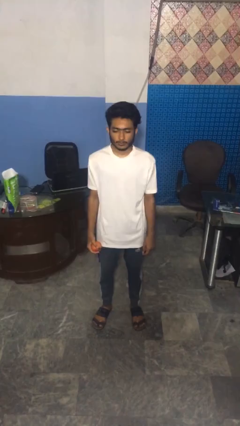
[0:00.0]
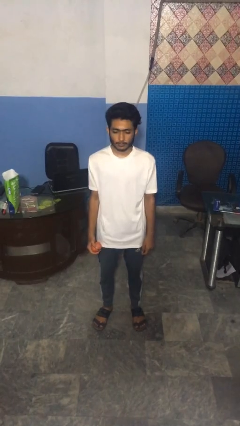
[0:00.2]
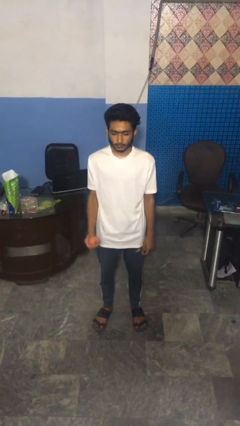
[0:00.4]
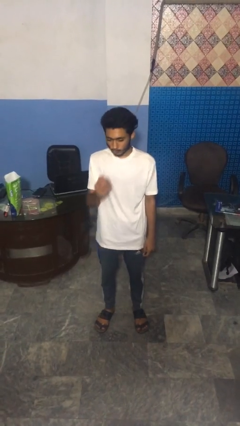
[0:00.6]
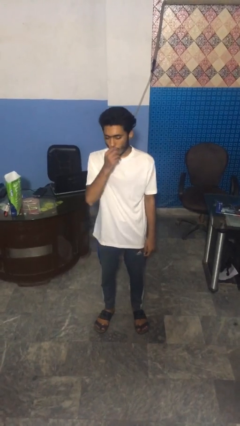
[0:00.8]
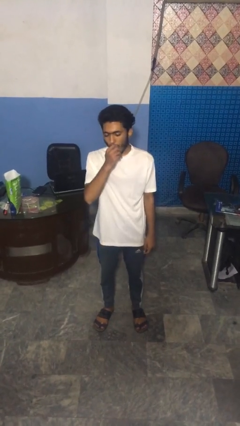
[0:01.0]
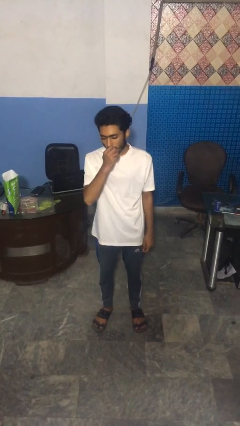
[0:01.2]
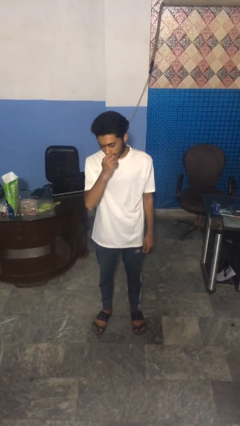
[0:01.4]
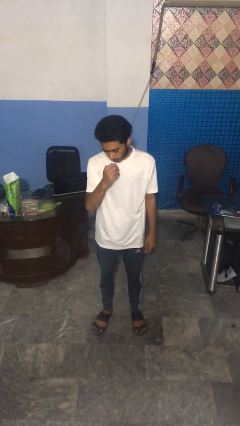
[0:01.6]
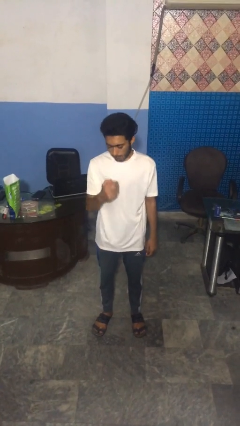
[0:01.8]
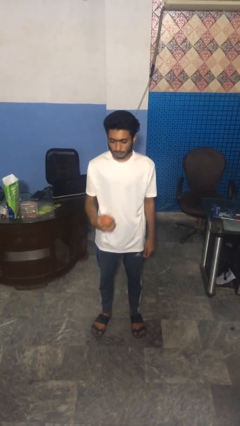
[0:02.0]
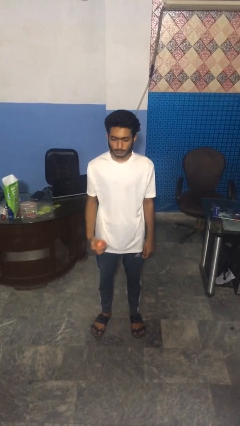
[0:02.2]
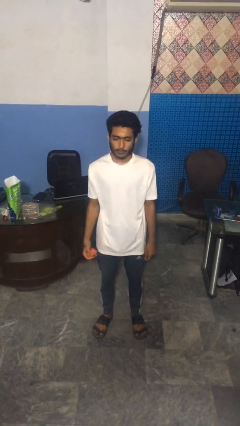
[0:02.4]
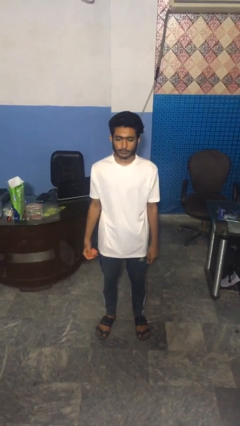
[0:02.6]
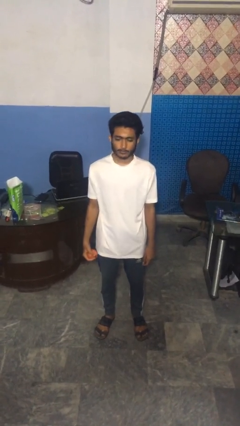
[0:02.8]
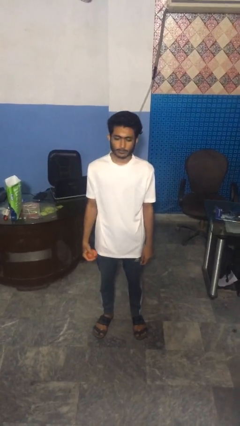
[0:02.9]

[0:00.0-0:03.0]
person eats apple

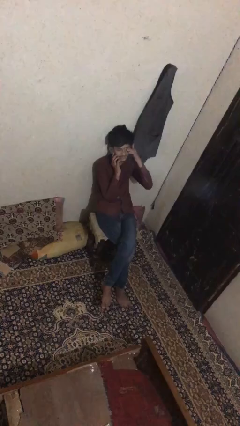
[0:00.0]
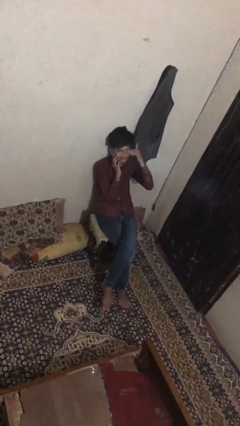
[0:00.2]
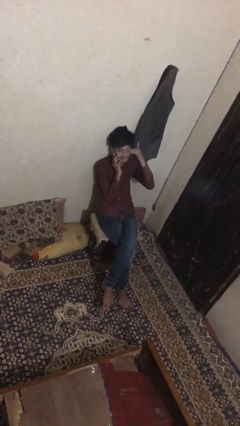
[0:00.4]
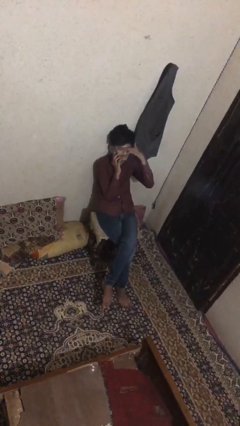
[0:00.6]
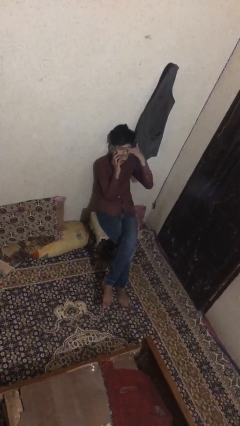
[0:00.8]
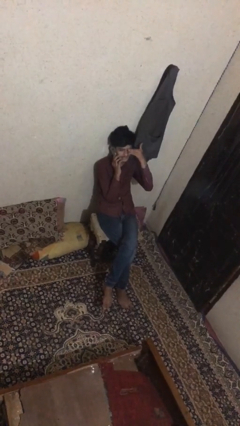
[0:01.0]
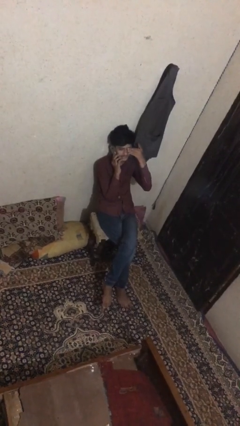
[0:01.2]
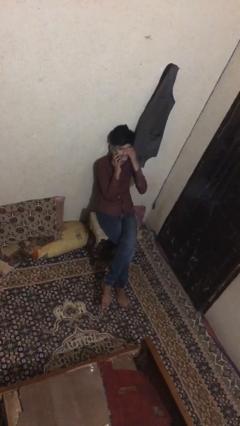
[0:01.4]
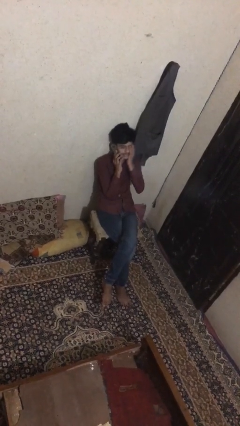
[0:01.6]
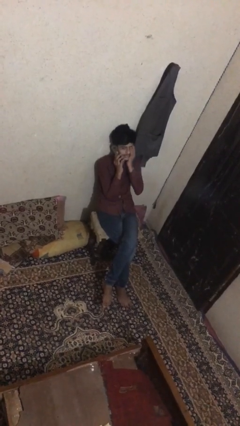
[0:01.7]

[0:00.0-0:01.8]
person talks on phone

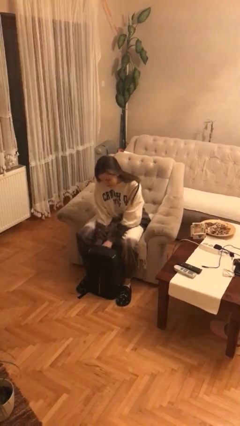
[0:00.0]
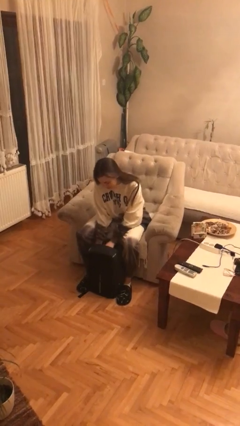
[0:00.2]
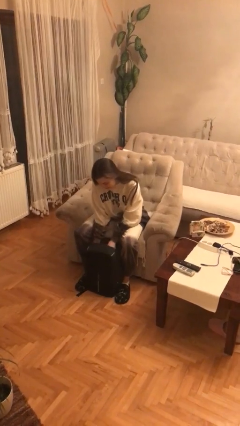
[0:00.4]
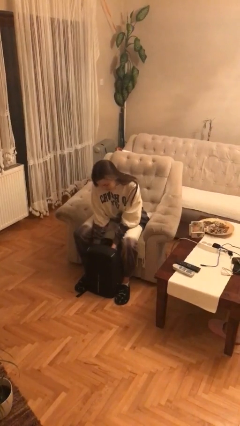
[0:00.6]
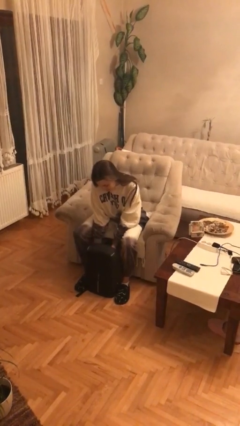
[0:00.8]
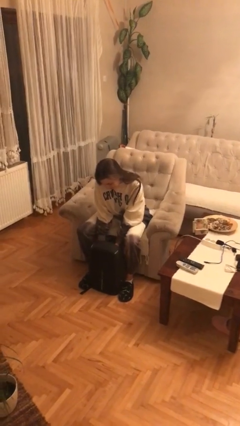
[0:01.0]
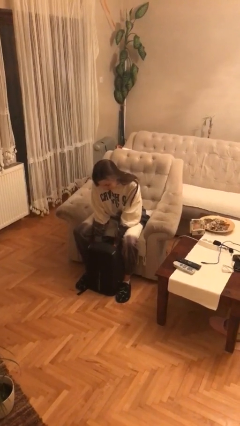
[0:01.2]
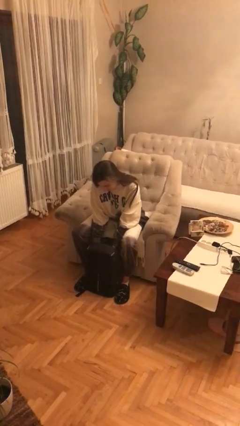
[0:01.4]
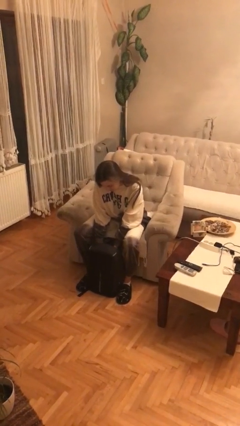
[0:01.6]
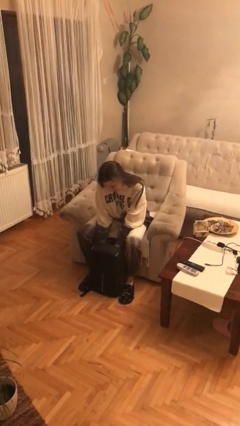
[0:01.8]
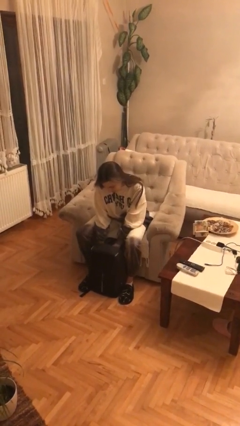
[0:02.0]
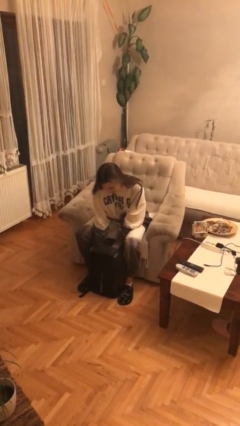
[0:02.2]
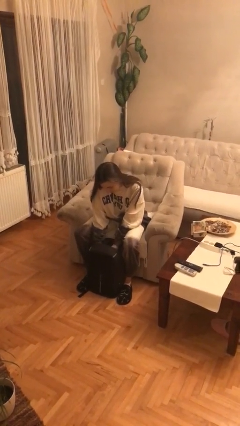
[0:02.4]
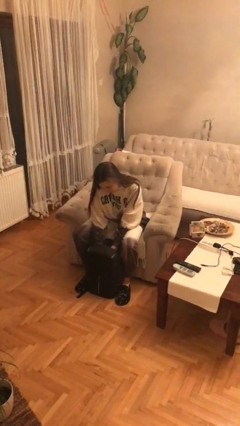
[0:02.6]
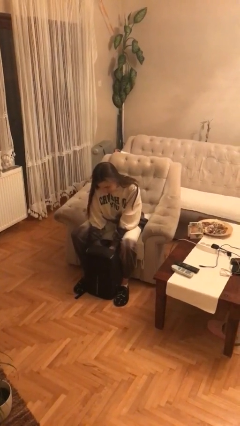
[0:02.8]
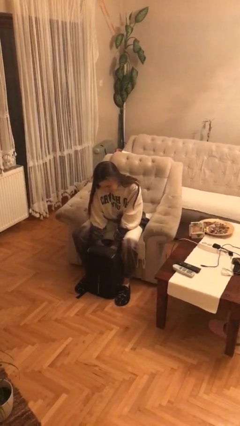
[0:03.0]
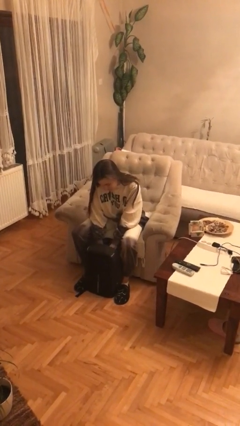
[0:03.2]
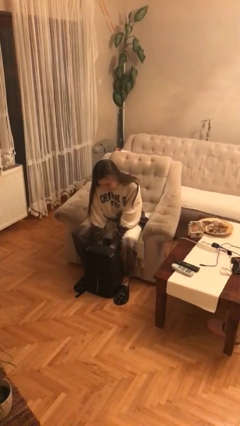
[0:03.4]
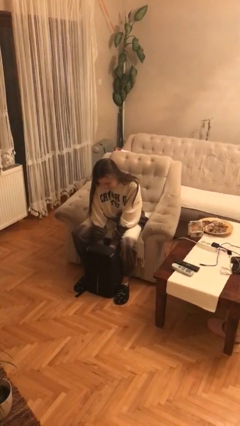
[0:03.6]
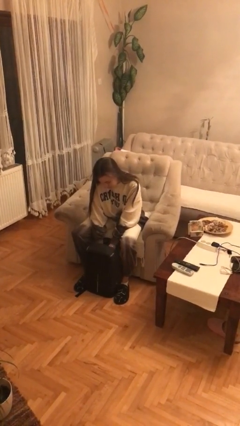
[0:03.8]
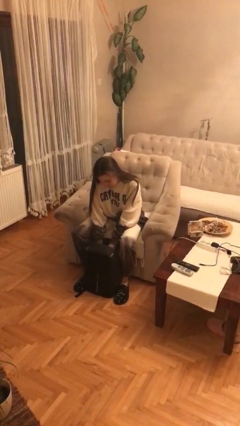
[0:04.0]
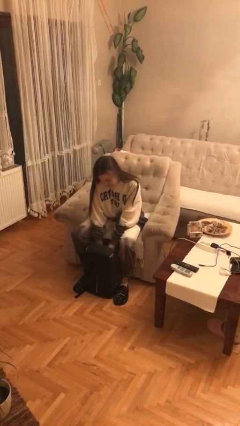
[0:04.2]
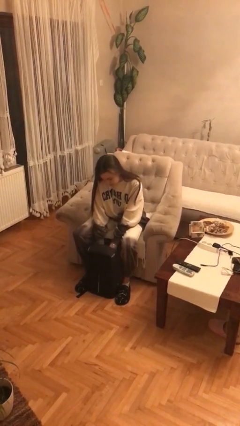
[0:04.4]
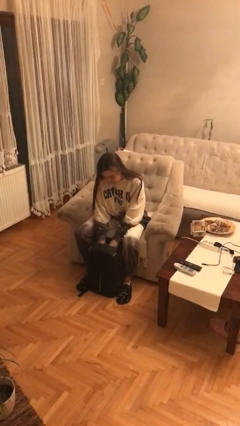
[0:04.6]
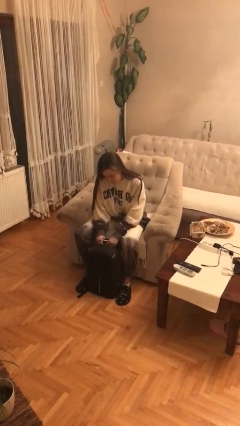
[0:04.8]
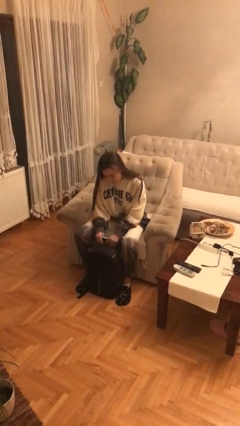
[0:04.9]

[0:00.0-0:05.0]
person searches in backpack

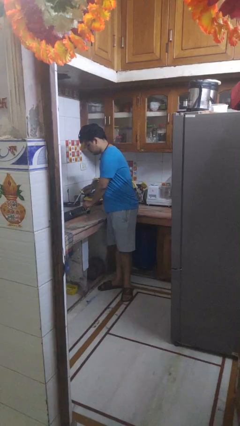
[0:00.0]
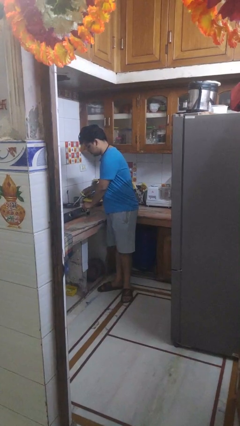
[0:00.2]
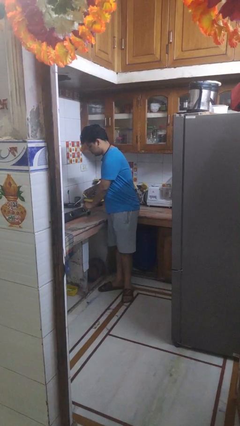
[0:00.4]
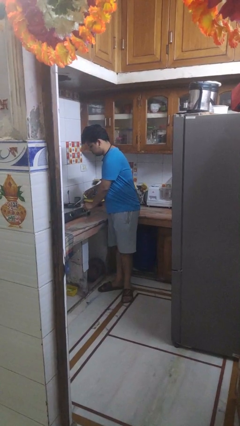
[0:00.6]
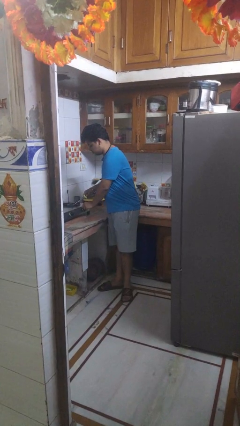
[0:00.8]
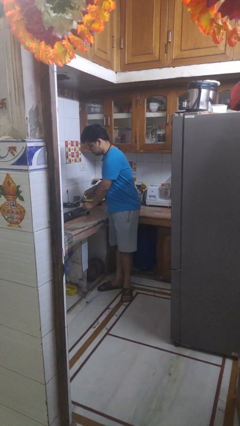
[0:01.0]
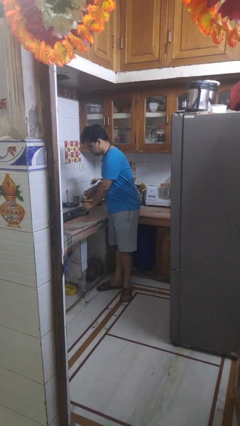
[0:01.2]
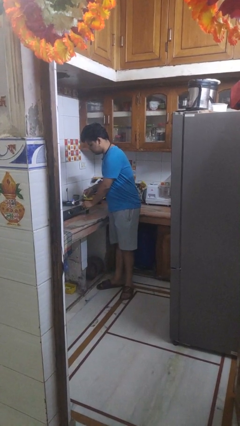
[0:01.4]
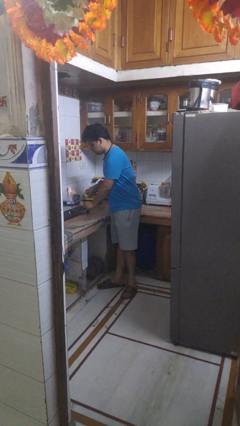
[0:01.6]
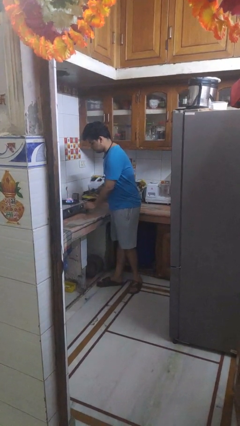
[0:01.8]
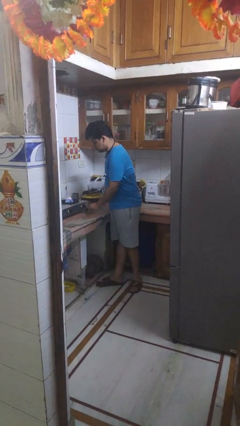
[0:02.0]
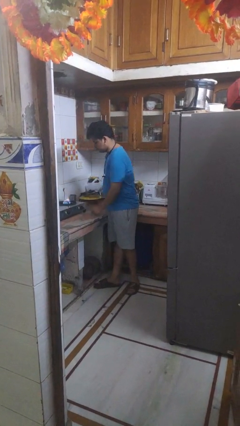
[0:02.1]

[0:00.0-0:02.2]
person turns on stovetop

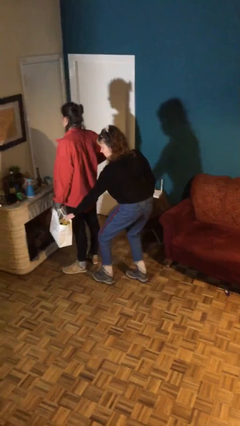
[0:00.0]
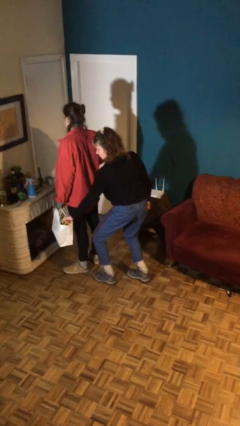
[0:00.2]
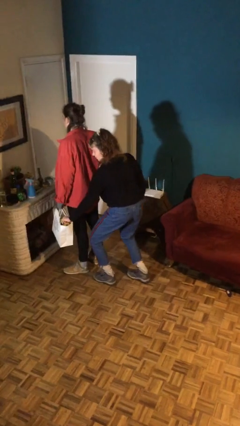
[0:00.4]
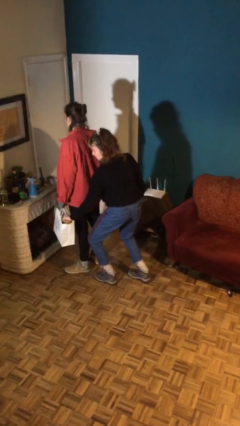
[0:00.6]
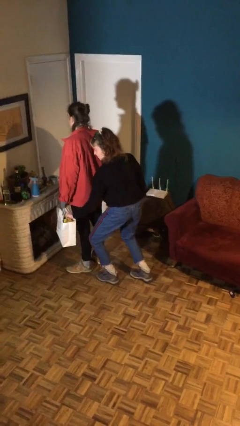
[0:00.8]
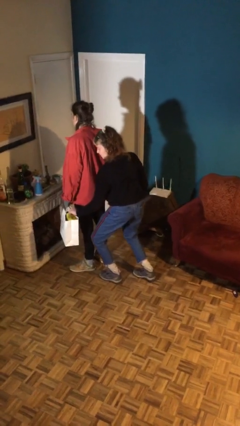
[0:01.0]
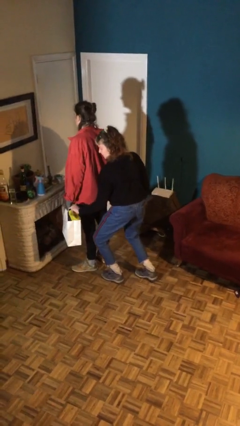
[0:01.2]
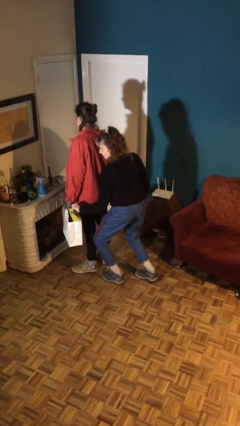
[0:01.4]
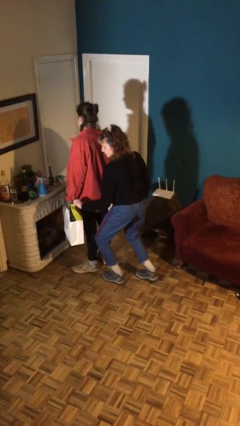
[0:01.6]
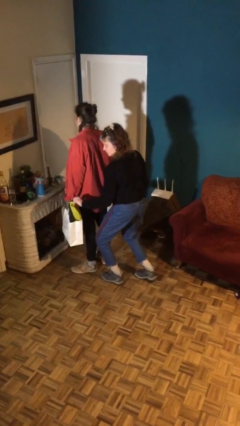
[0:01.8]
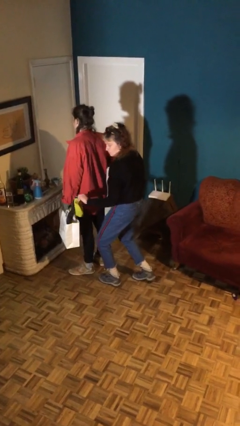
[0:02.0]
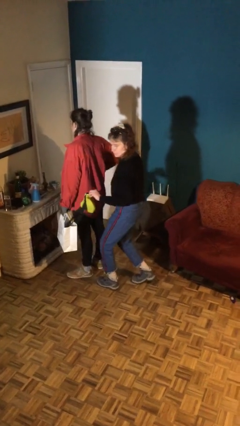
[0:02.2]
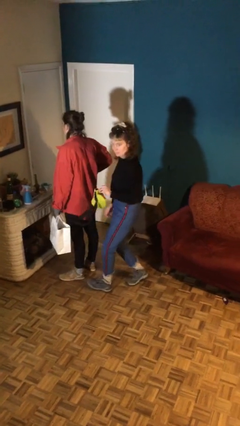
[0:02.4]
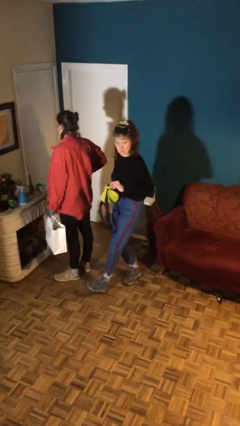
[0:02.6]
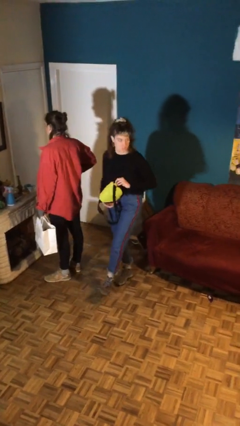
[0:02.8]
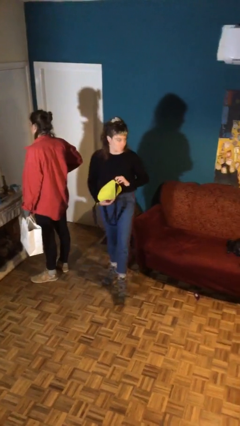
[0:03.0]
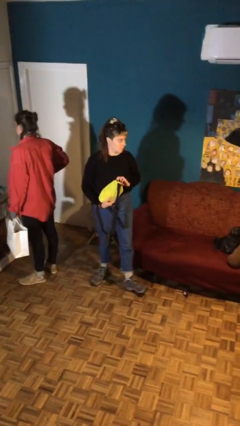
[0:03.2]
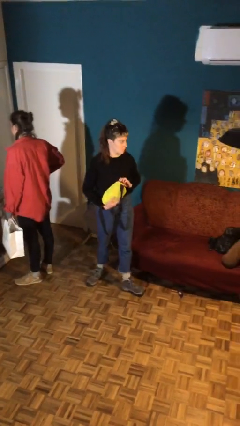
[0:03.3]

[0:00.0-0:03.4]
person steals object from person

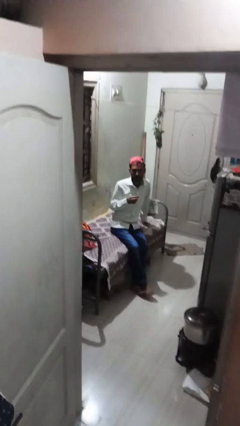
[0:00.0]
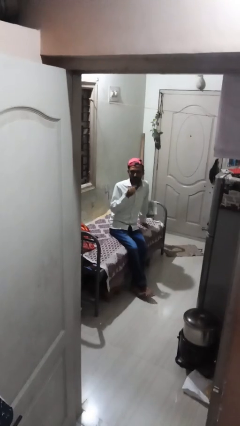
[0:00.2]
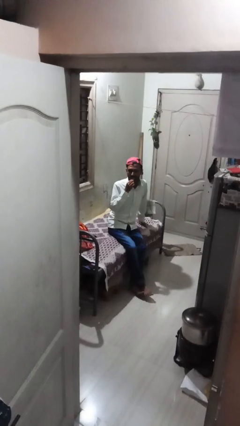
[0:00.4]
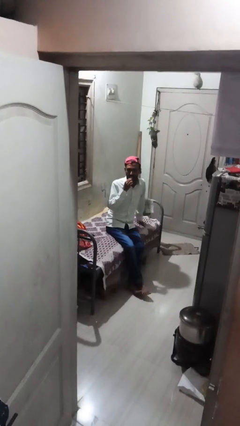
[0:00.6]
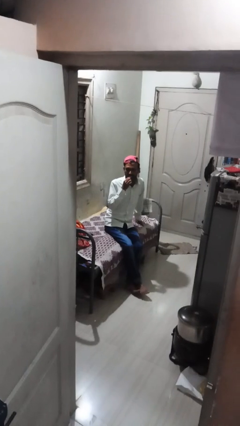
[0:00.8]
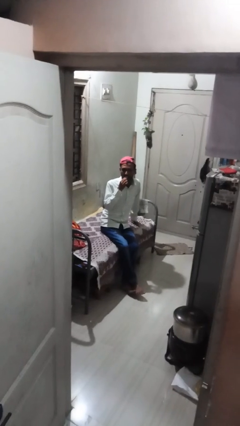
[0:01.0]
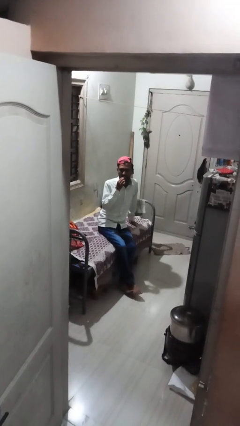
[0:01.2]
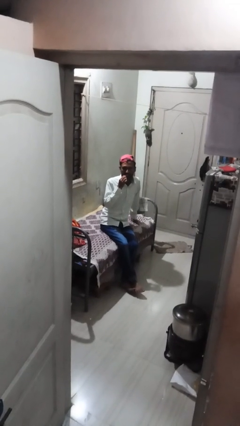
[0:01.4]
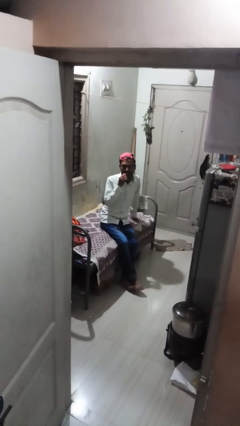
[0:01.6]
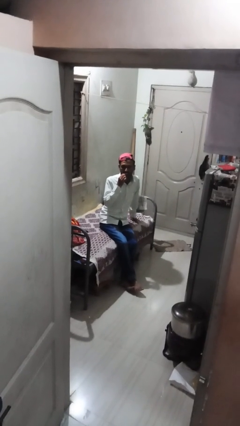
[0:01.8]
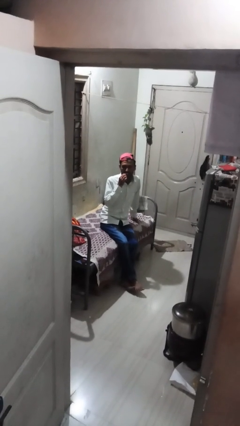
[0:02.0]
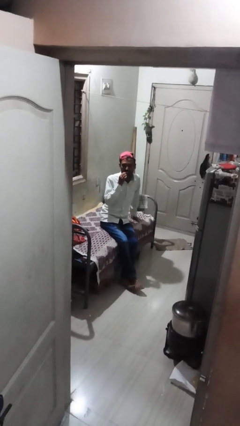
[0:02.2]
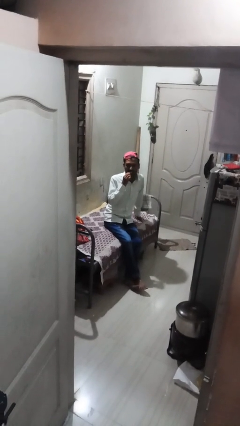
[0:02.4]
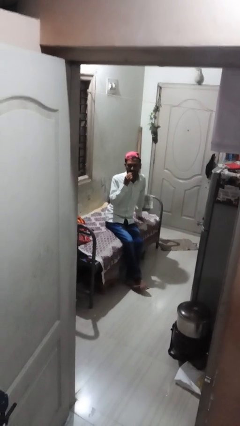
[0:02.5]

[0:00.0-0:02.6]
person flosses
